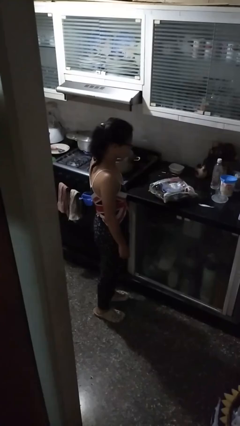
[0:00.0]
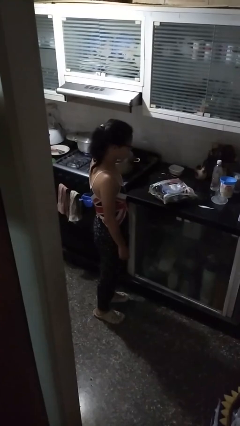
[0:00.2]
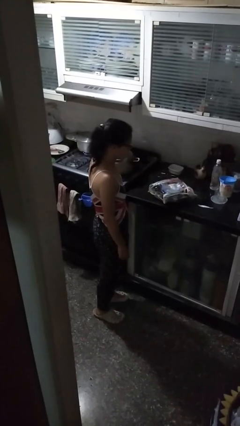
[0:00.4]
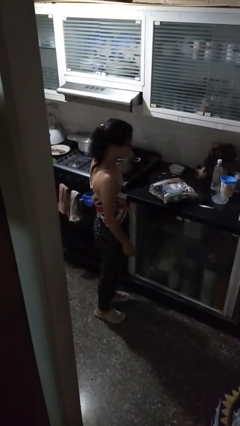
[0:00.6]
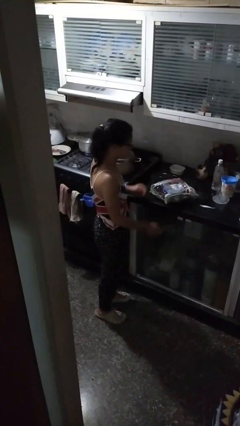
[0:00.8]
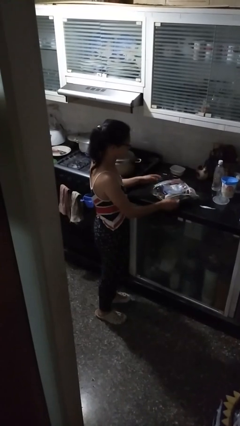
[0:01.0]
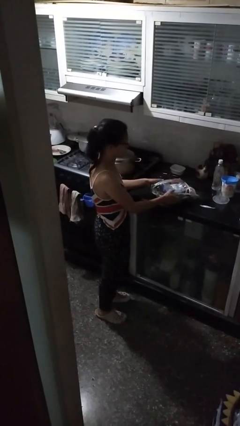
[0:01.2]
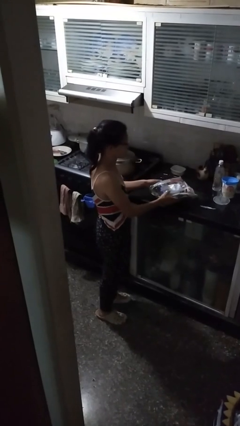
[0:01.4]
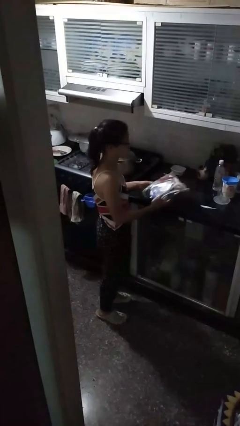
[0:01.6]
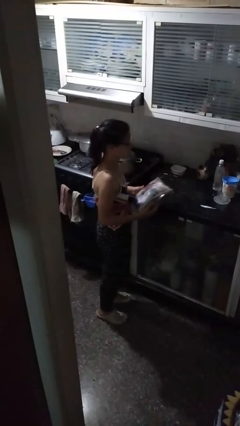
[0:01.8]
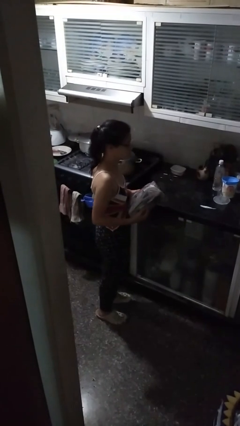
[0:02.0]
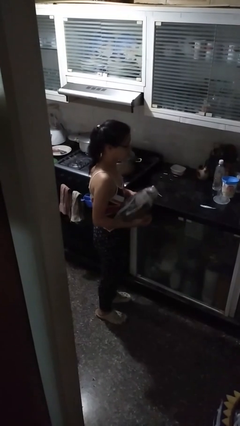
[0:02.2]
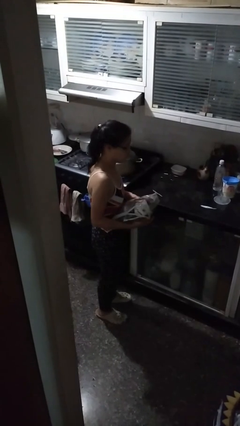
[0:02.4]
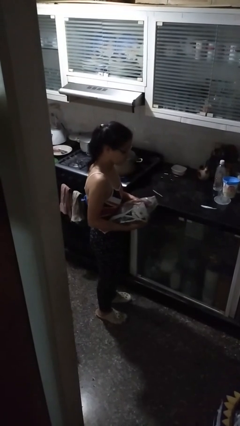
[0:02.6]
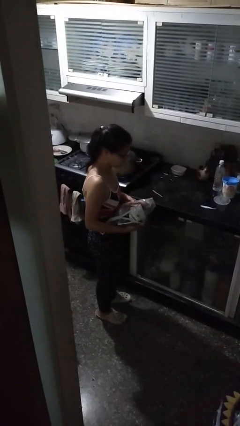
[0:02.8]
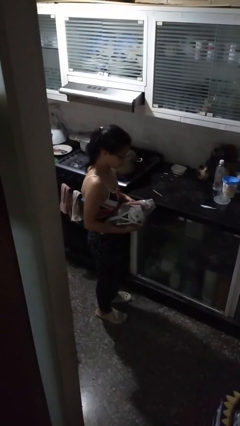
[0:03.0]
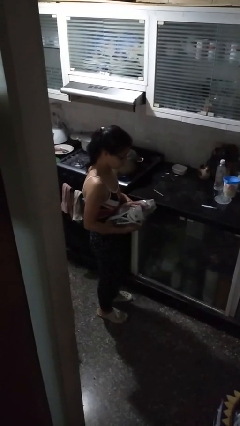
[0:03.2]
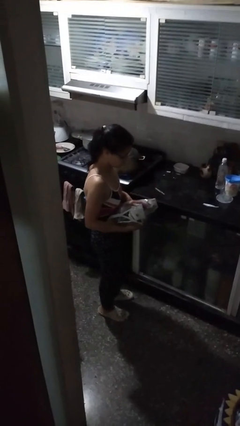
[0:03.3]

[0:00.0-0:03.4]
person picks up object from countertop

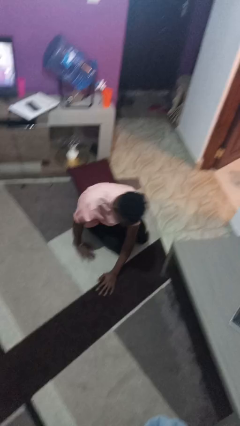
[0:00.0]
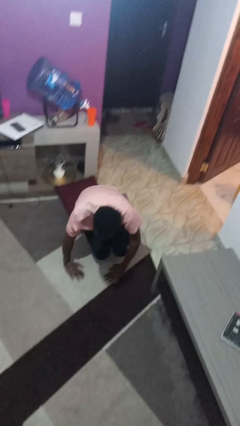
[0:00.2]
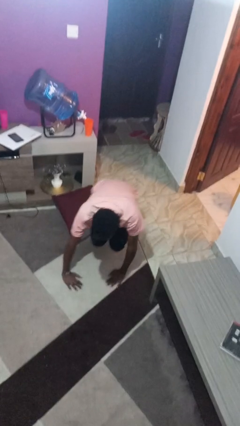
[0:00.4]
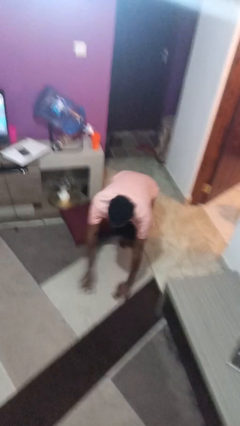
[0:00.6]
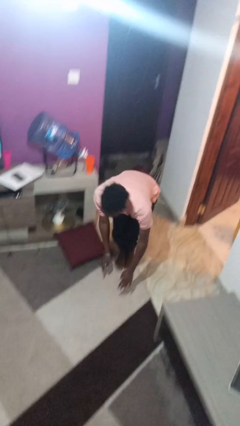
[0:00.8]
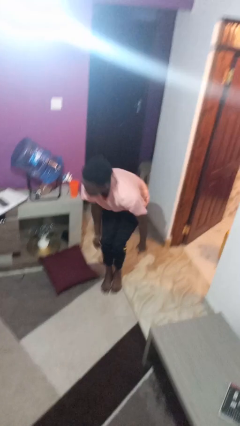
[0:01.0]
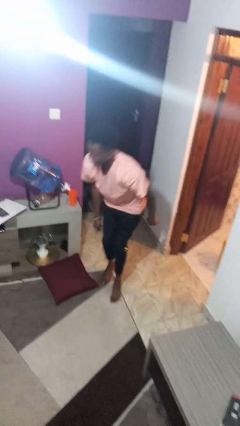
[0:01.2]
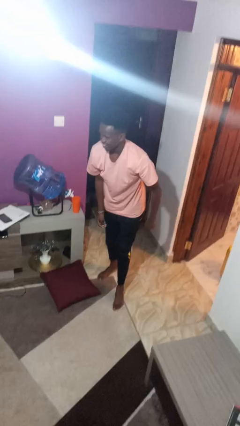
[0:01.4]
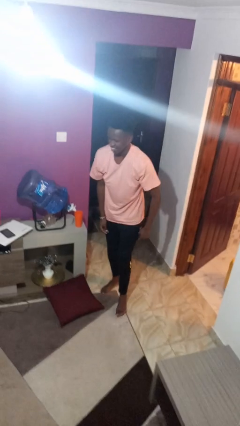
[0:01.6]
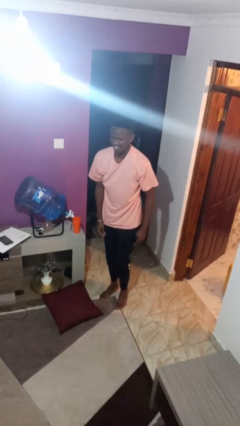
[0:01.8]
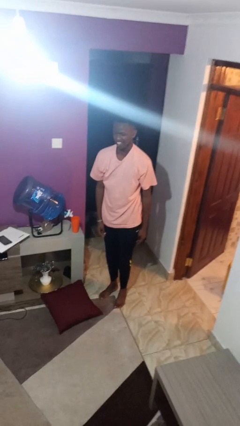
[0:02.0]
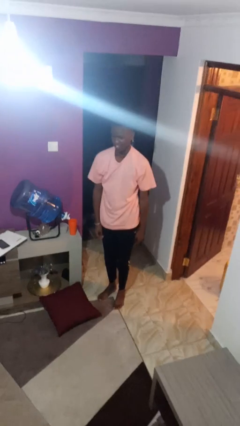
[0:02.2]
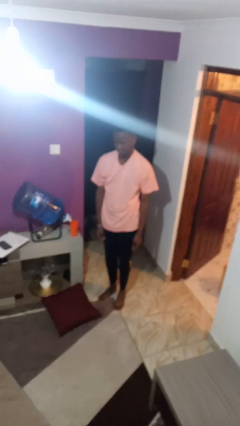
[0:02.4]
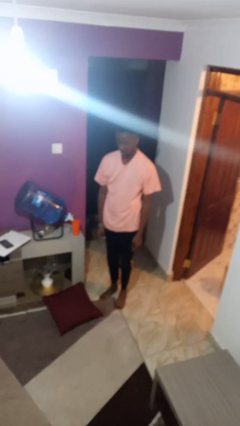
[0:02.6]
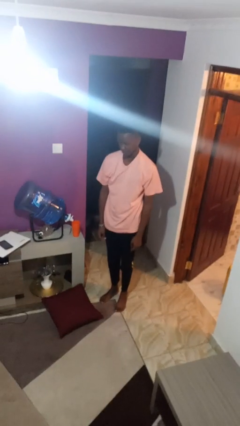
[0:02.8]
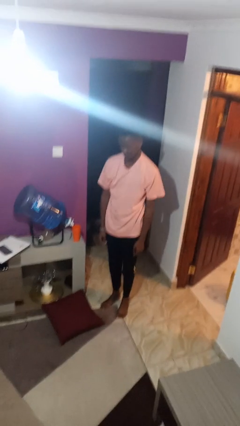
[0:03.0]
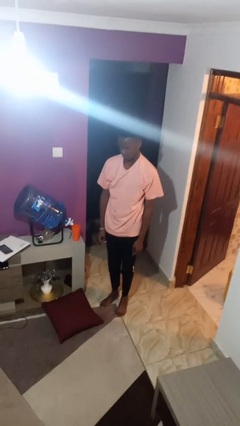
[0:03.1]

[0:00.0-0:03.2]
person stands up from floor

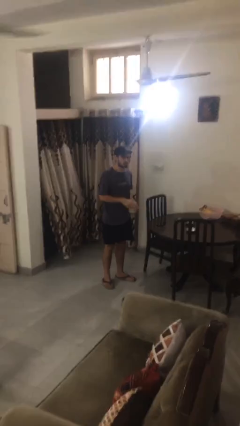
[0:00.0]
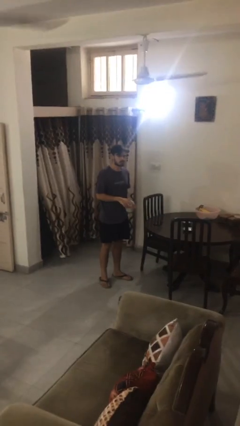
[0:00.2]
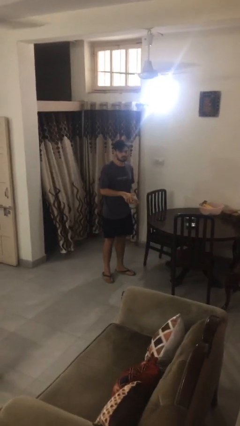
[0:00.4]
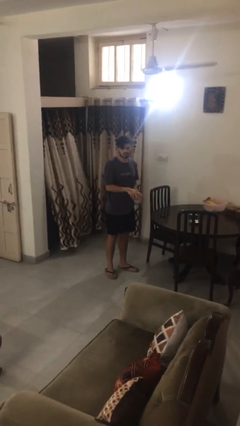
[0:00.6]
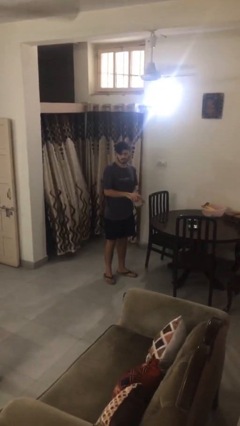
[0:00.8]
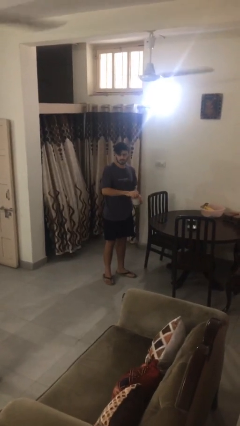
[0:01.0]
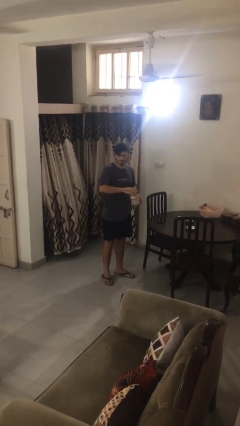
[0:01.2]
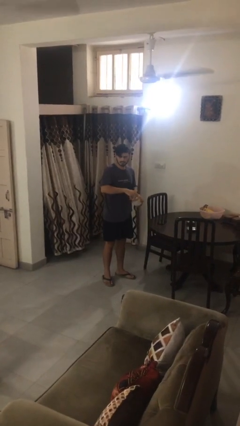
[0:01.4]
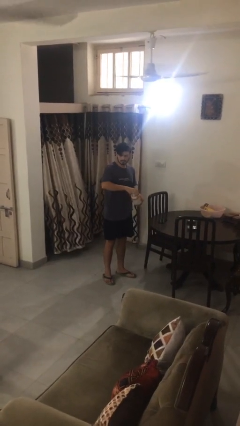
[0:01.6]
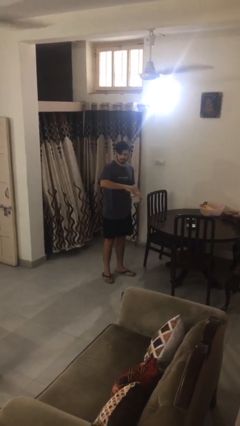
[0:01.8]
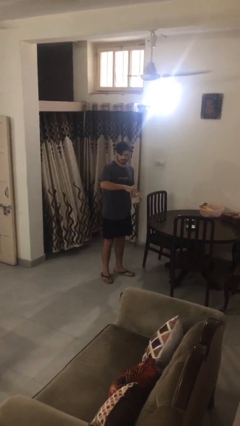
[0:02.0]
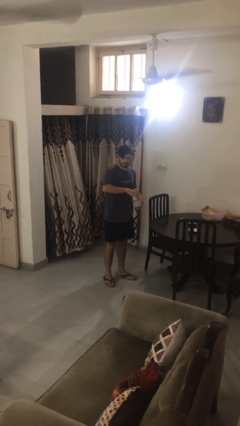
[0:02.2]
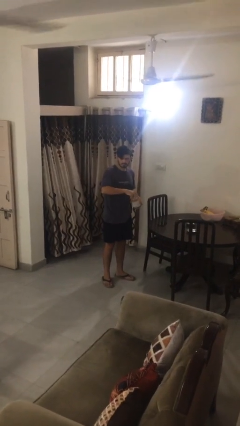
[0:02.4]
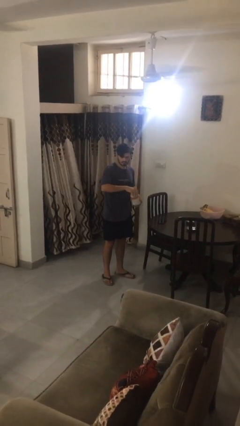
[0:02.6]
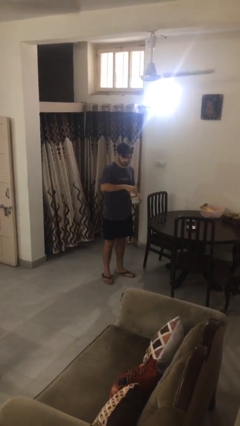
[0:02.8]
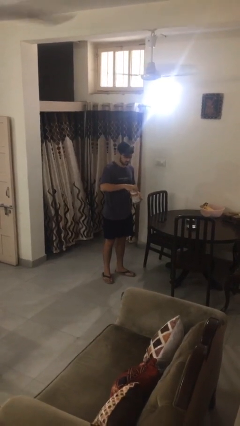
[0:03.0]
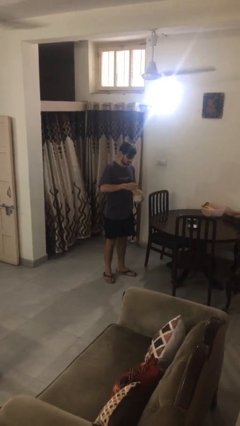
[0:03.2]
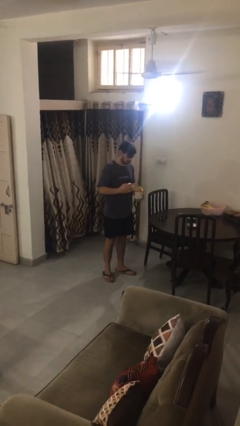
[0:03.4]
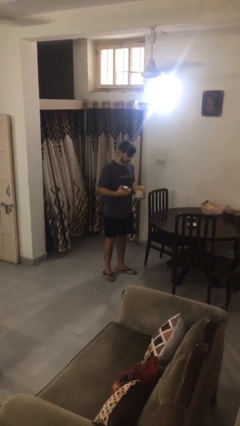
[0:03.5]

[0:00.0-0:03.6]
person opens jar

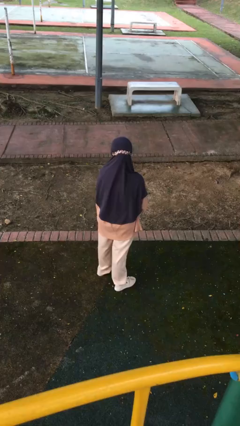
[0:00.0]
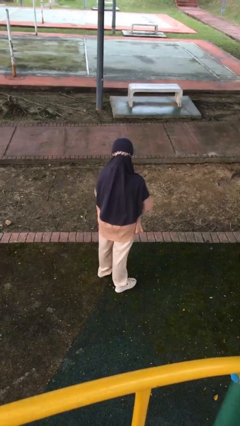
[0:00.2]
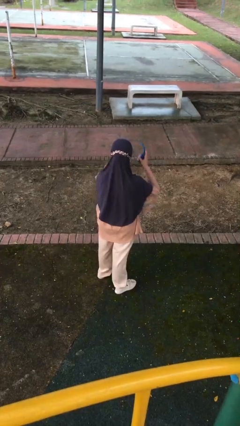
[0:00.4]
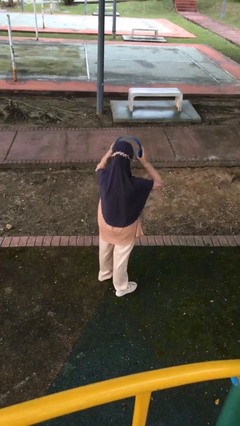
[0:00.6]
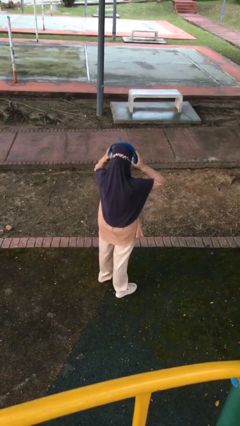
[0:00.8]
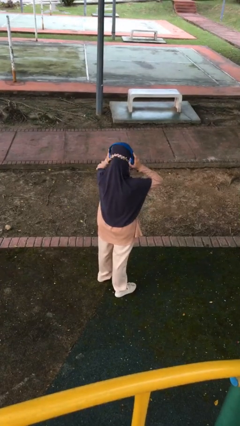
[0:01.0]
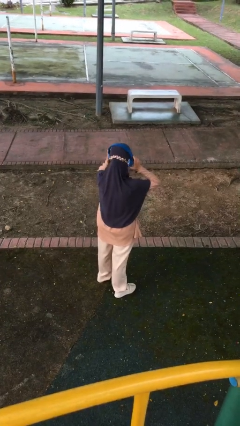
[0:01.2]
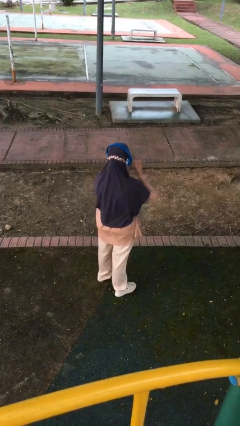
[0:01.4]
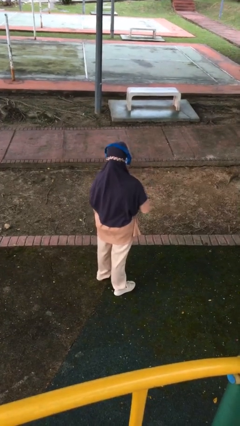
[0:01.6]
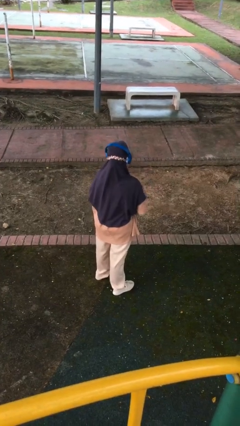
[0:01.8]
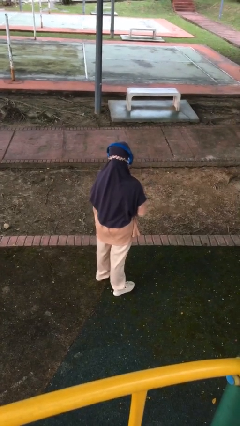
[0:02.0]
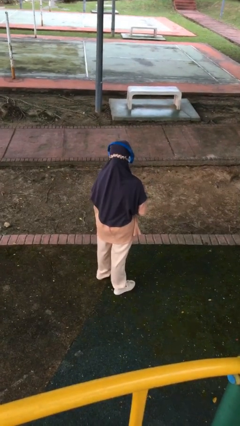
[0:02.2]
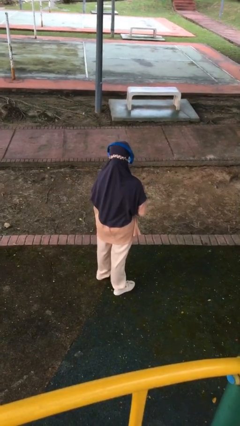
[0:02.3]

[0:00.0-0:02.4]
person puts on headphones

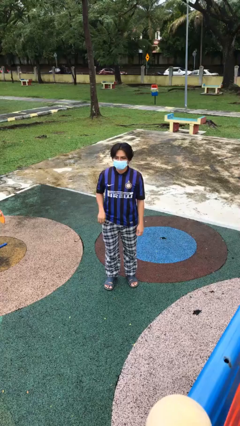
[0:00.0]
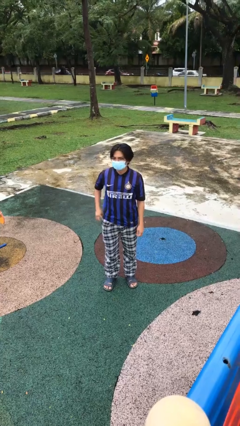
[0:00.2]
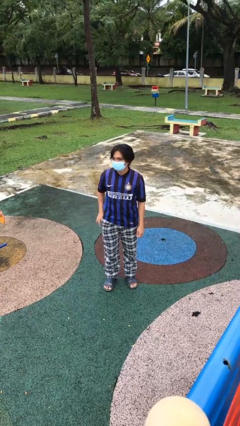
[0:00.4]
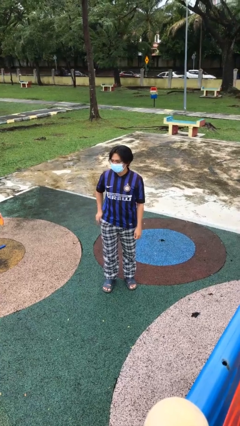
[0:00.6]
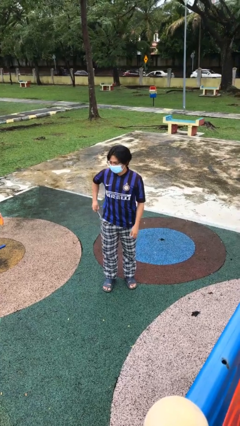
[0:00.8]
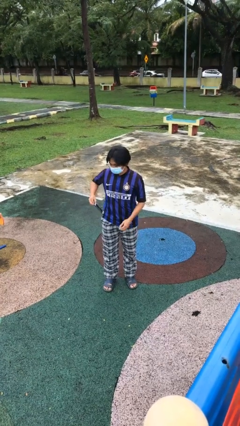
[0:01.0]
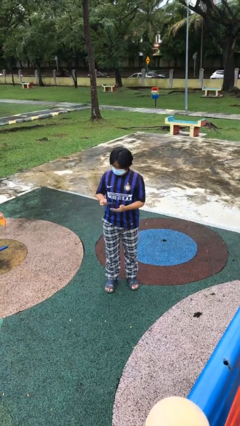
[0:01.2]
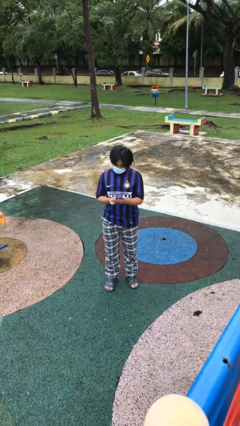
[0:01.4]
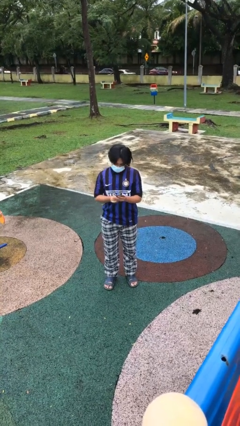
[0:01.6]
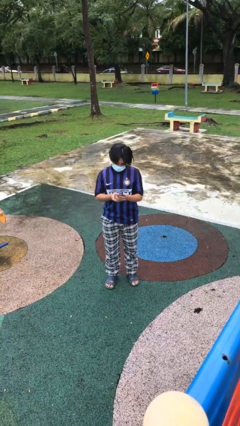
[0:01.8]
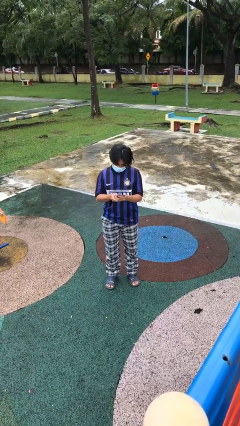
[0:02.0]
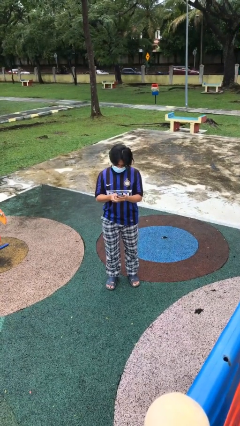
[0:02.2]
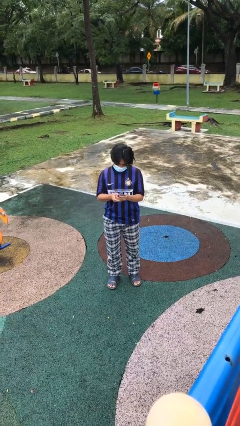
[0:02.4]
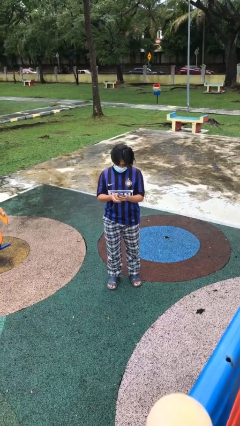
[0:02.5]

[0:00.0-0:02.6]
person takes phone from pocket

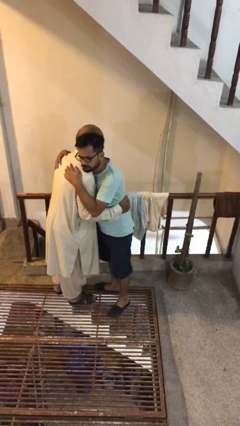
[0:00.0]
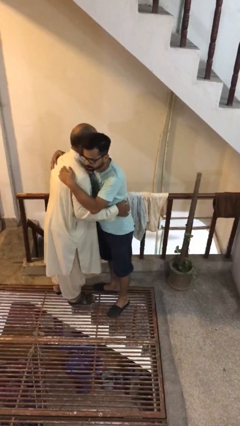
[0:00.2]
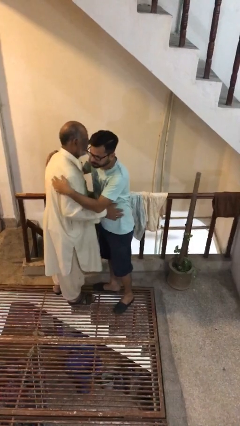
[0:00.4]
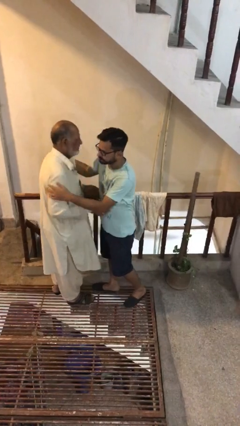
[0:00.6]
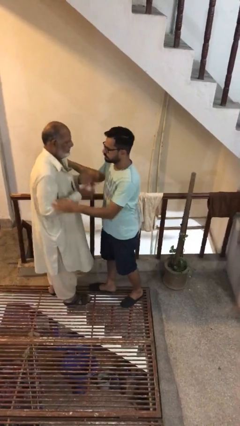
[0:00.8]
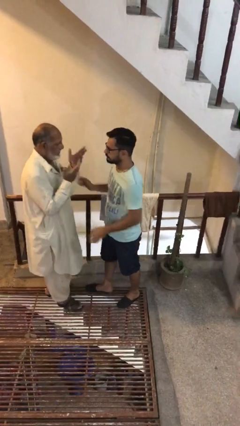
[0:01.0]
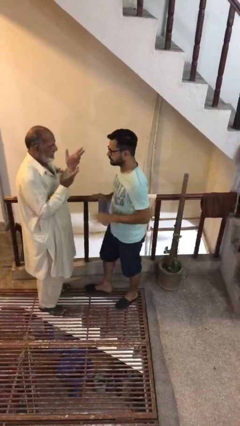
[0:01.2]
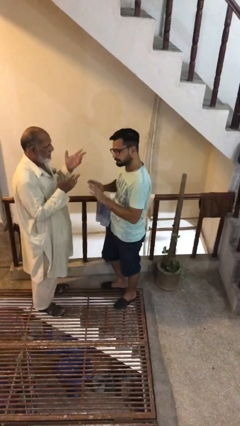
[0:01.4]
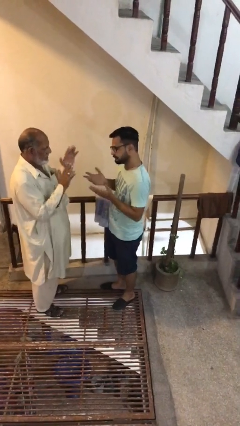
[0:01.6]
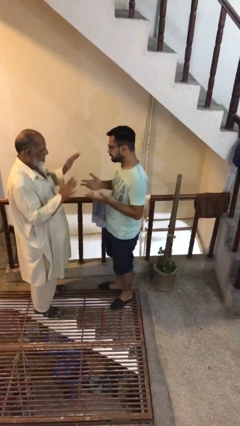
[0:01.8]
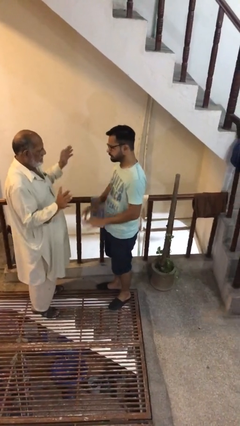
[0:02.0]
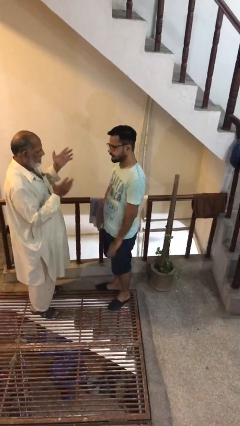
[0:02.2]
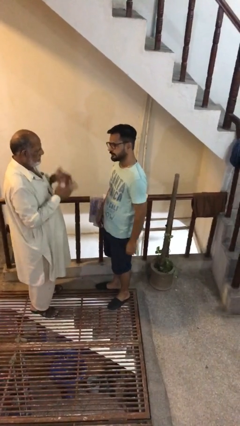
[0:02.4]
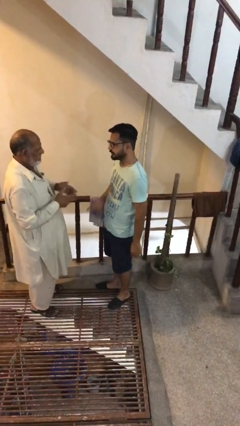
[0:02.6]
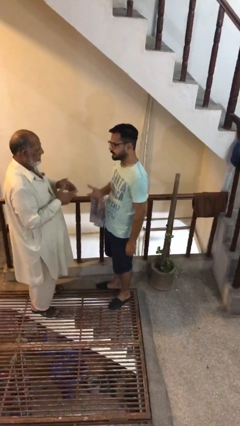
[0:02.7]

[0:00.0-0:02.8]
person talks to person
